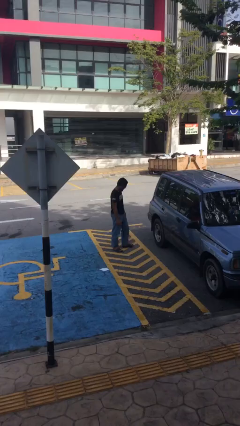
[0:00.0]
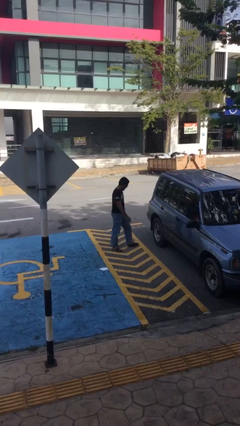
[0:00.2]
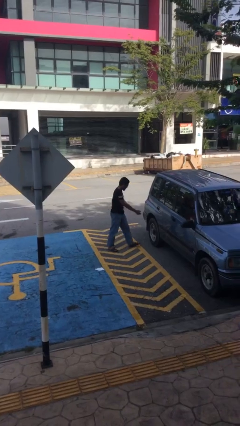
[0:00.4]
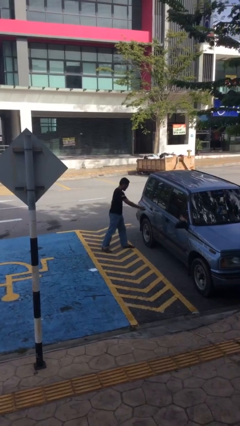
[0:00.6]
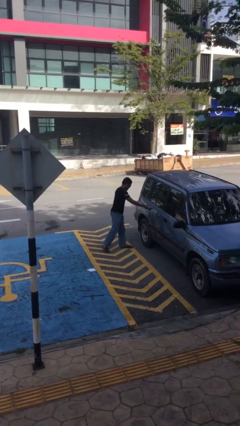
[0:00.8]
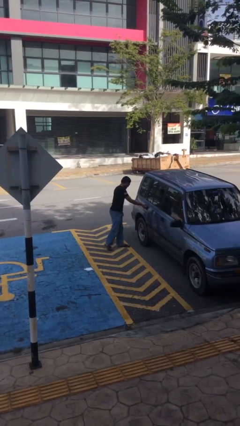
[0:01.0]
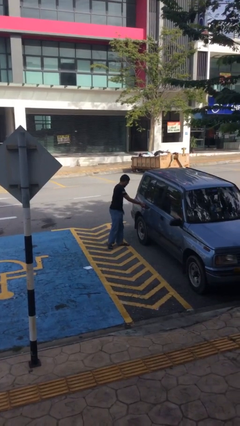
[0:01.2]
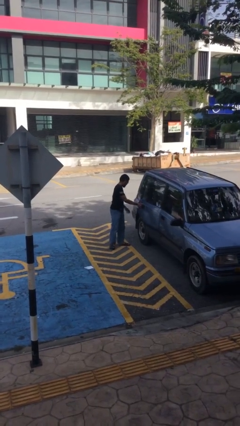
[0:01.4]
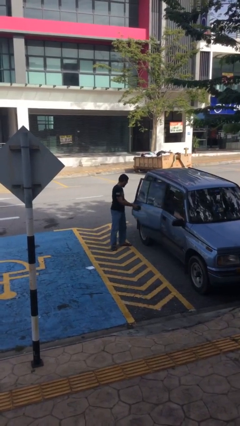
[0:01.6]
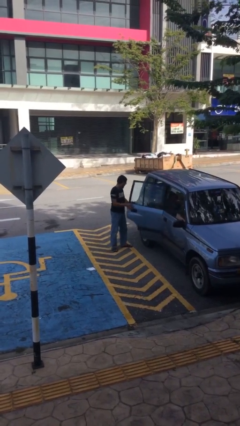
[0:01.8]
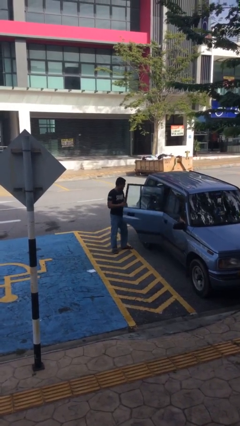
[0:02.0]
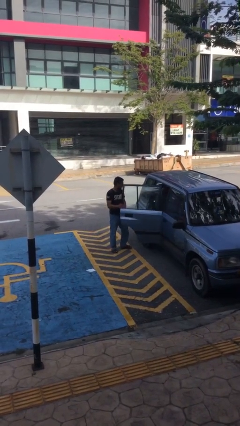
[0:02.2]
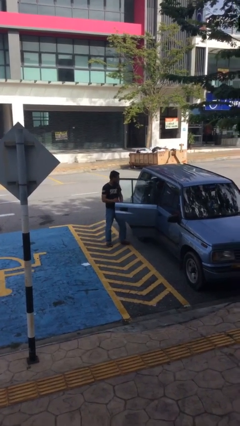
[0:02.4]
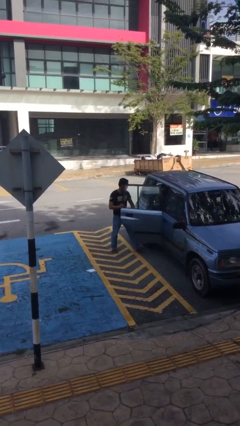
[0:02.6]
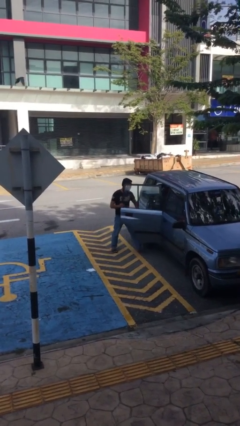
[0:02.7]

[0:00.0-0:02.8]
person opens car door

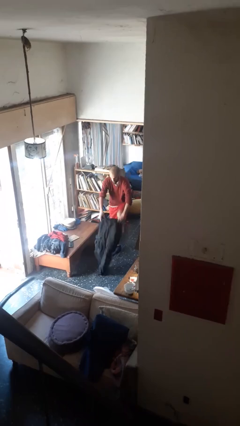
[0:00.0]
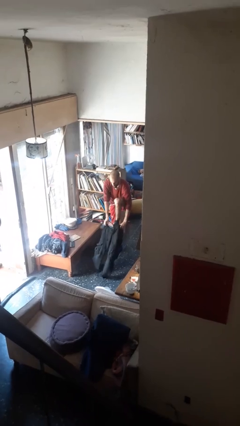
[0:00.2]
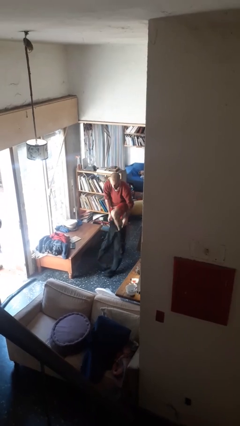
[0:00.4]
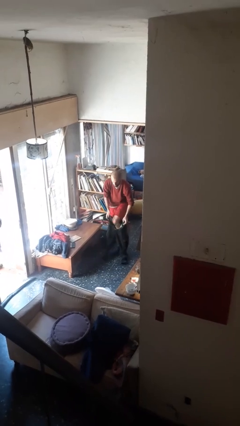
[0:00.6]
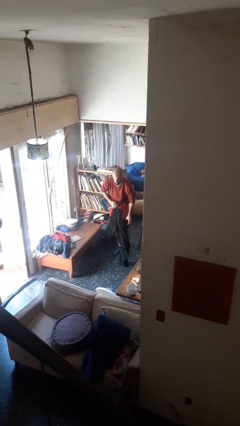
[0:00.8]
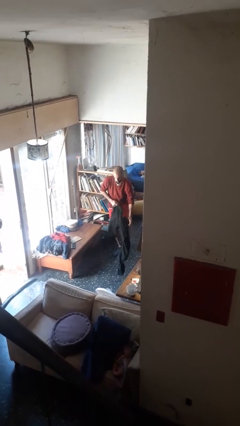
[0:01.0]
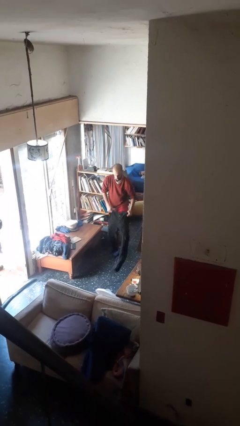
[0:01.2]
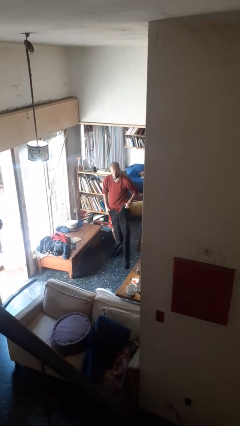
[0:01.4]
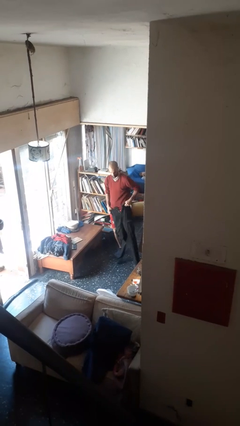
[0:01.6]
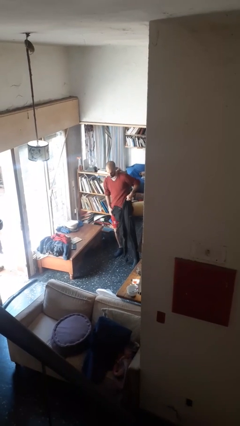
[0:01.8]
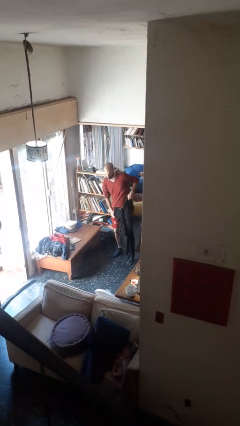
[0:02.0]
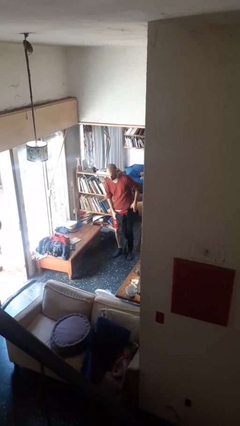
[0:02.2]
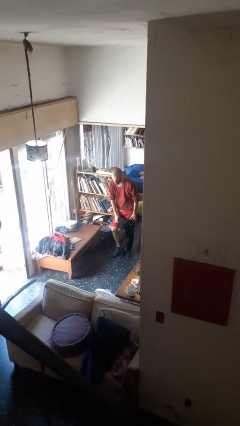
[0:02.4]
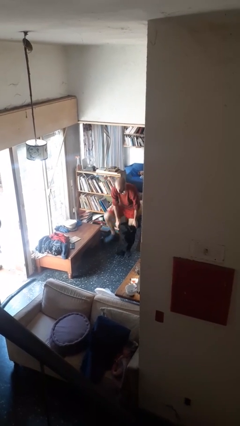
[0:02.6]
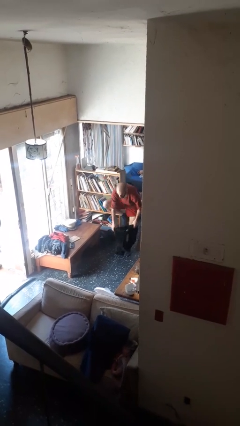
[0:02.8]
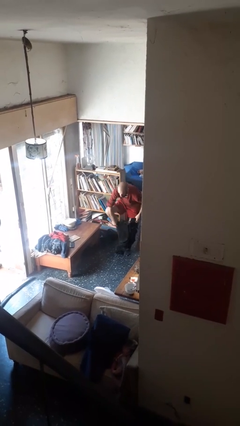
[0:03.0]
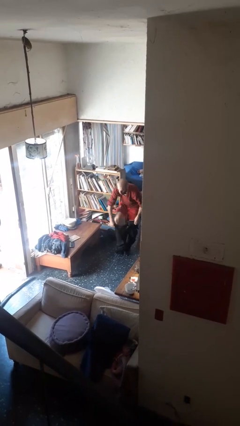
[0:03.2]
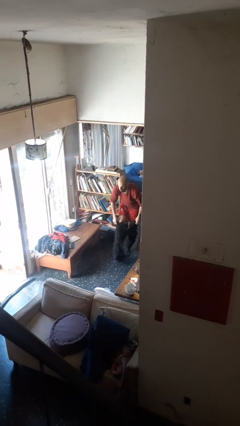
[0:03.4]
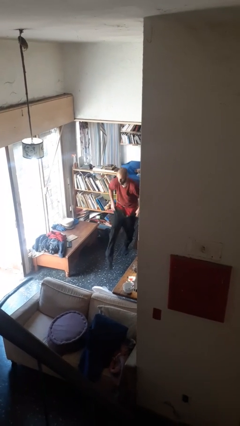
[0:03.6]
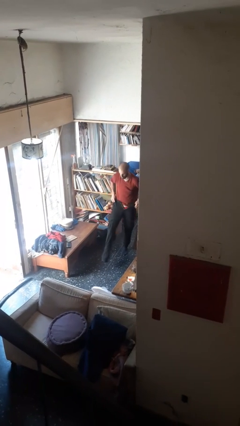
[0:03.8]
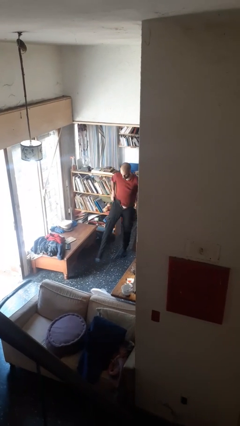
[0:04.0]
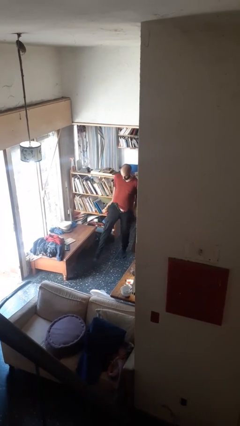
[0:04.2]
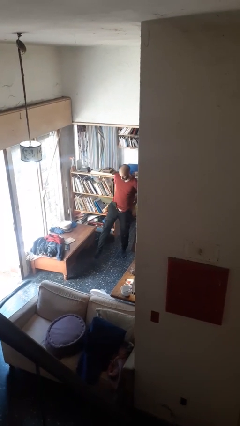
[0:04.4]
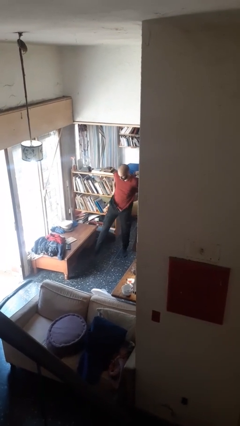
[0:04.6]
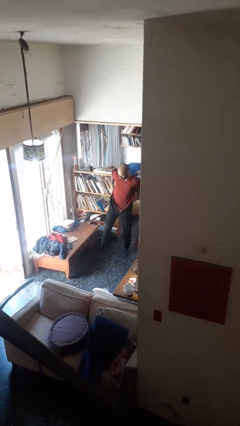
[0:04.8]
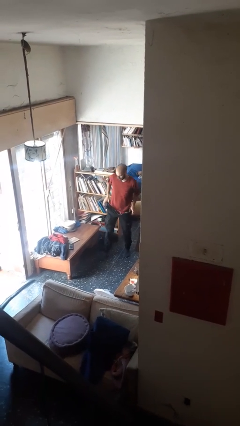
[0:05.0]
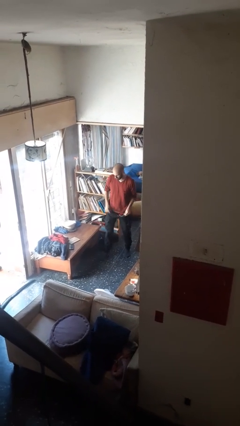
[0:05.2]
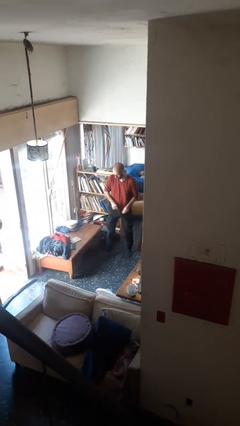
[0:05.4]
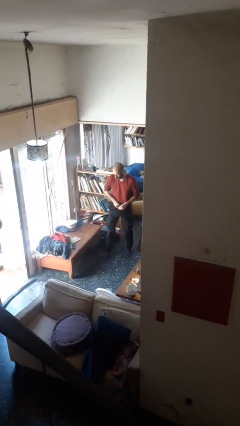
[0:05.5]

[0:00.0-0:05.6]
person puts on pants

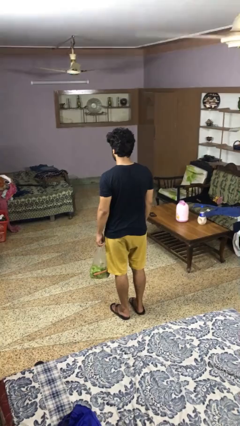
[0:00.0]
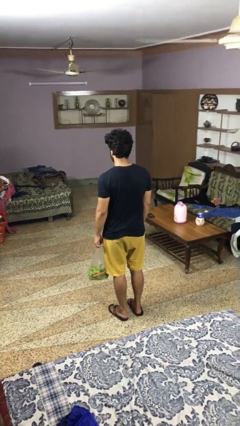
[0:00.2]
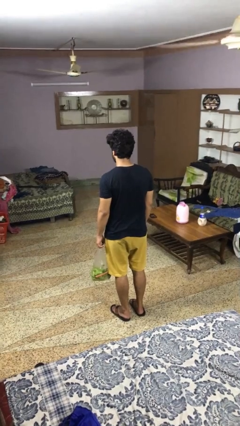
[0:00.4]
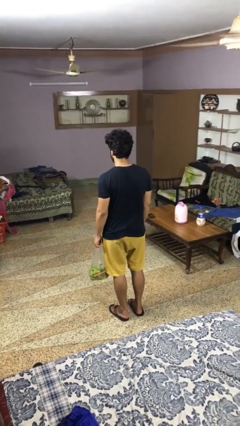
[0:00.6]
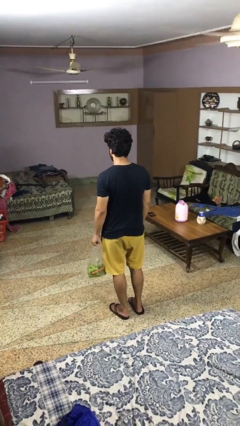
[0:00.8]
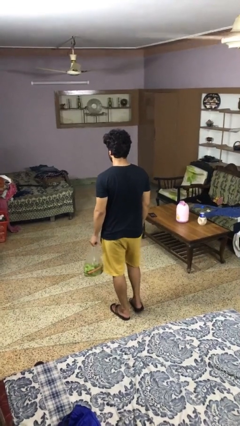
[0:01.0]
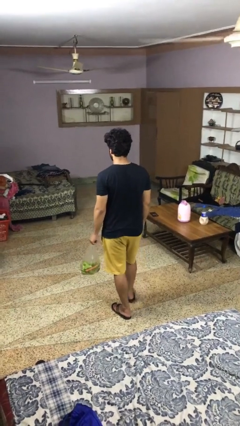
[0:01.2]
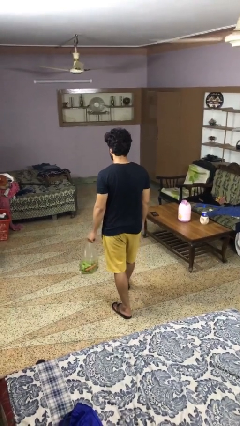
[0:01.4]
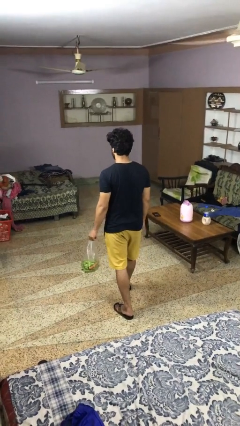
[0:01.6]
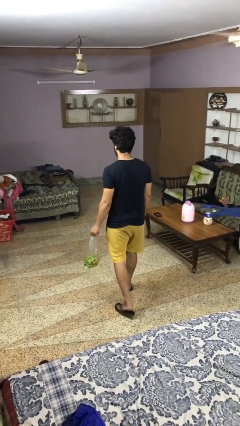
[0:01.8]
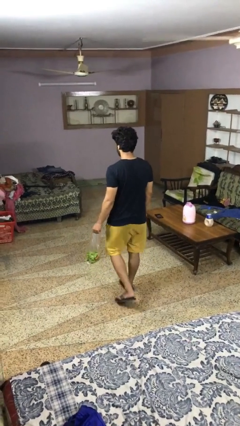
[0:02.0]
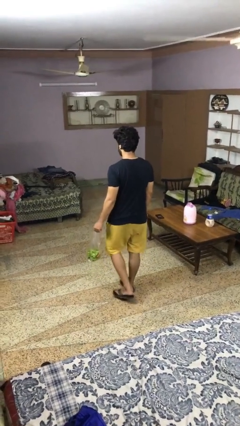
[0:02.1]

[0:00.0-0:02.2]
person carries groceries

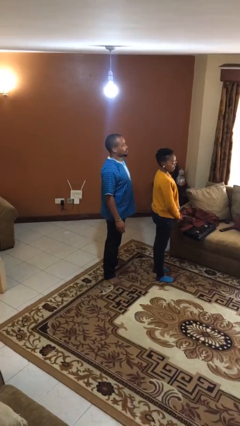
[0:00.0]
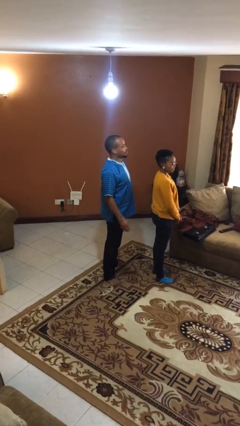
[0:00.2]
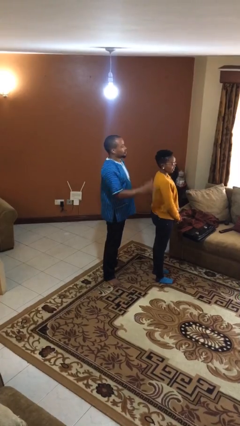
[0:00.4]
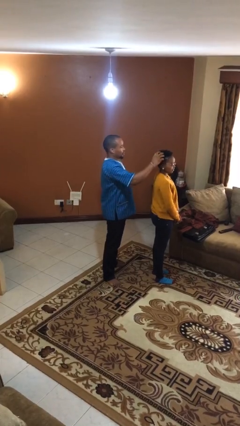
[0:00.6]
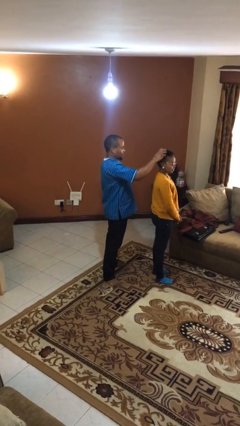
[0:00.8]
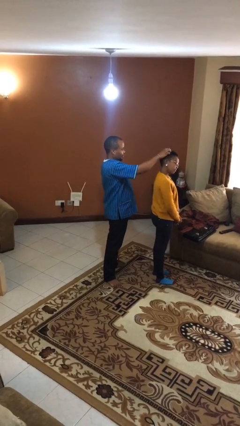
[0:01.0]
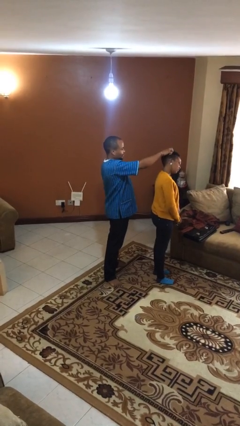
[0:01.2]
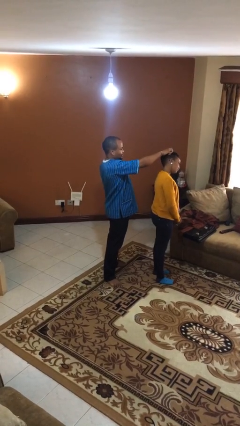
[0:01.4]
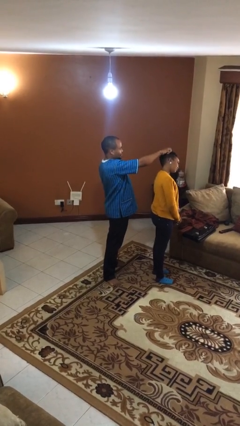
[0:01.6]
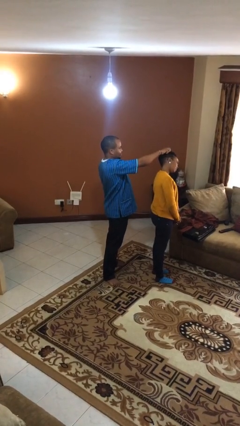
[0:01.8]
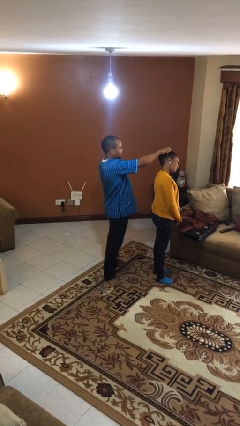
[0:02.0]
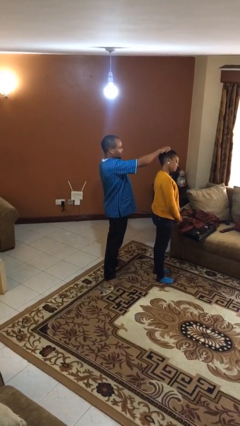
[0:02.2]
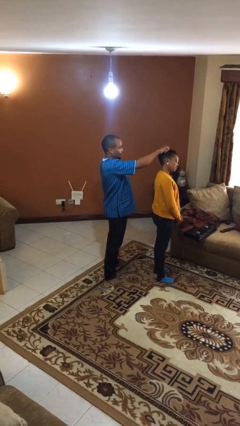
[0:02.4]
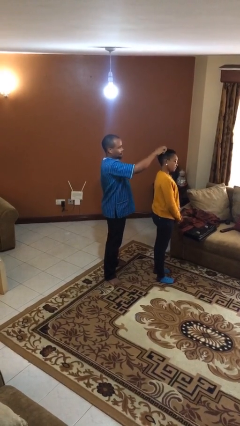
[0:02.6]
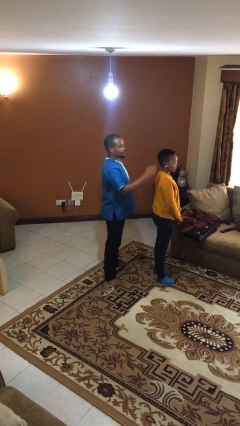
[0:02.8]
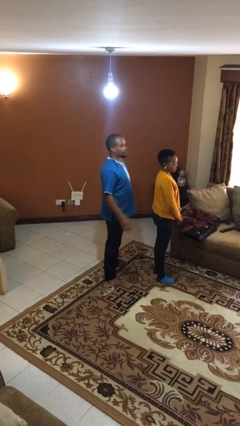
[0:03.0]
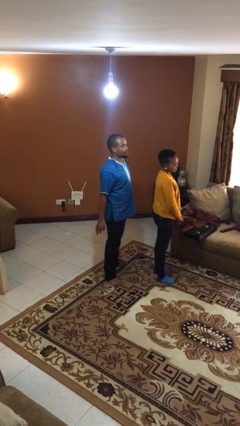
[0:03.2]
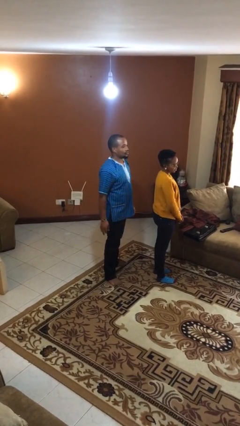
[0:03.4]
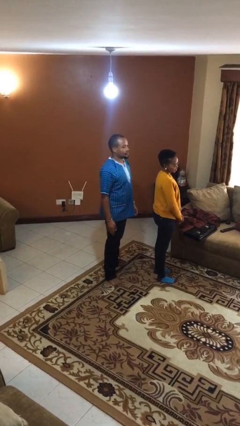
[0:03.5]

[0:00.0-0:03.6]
person grabs person by hair

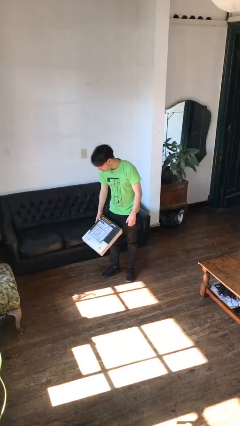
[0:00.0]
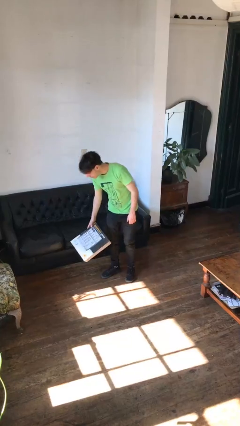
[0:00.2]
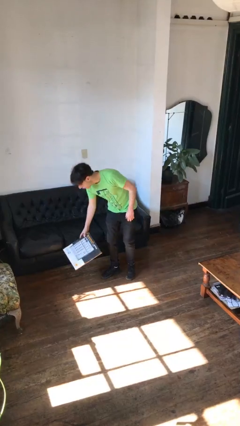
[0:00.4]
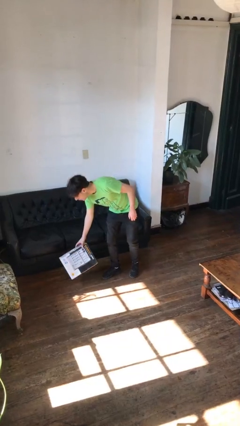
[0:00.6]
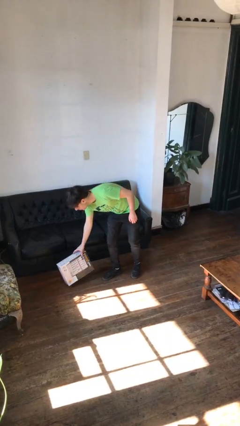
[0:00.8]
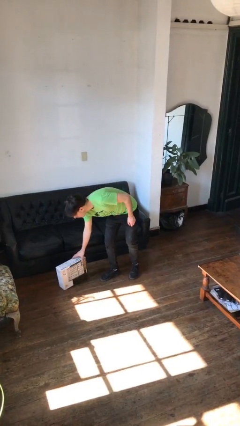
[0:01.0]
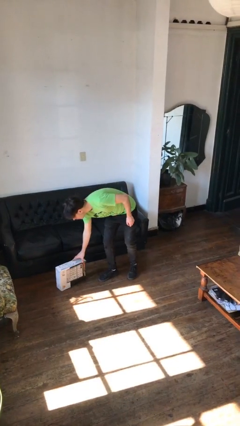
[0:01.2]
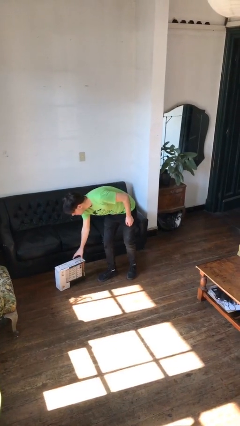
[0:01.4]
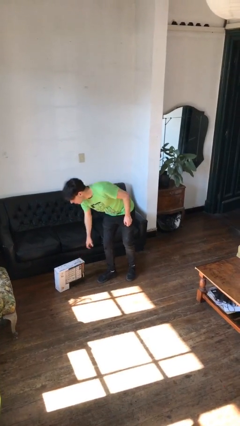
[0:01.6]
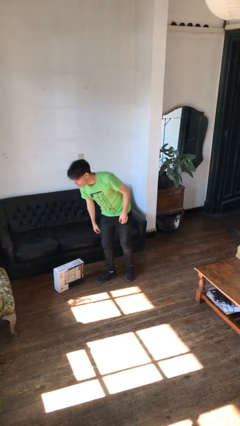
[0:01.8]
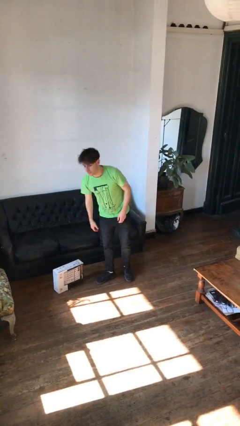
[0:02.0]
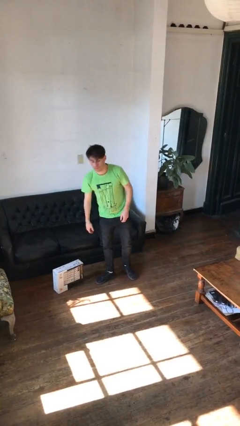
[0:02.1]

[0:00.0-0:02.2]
person puts down object on floor

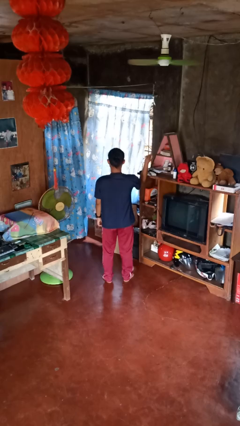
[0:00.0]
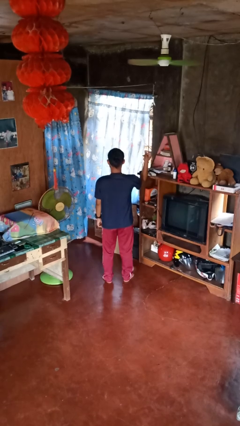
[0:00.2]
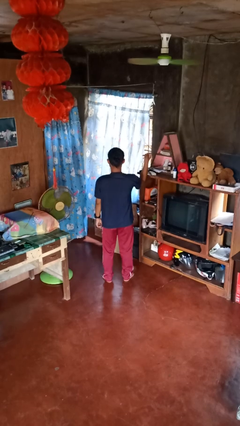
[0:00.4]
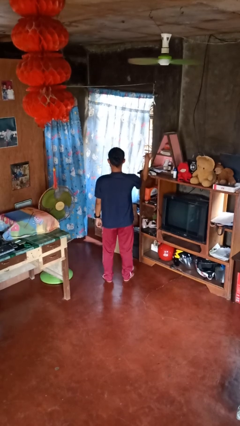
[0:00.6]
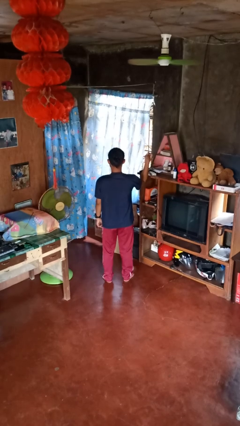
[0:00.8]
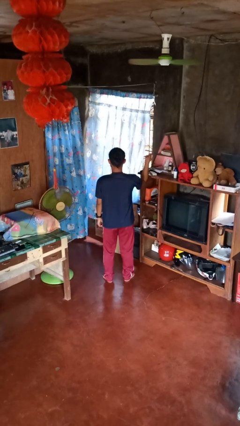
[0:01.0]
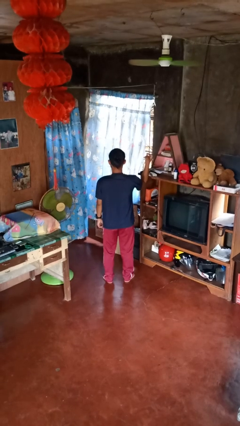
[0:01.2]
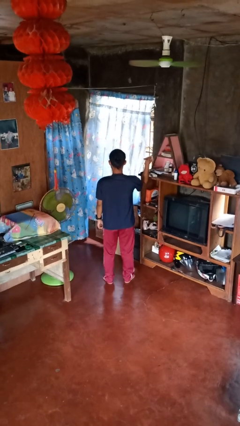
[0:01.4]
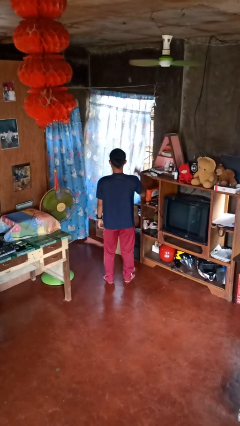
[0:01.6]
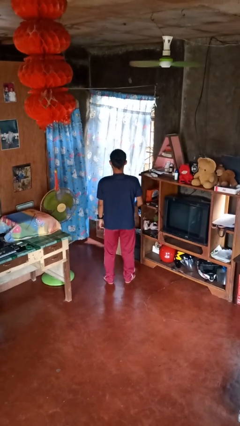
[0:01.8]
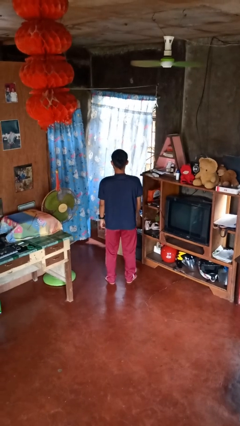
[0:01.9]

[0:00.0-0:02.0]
person snaps fingers
